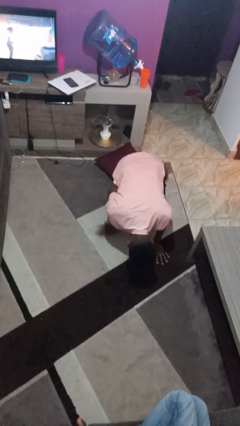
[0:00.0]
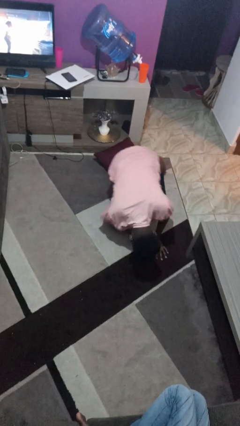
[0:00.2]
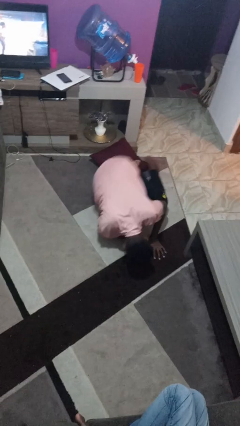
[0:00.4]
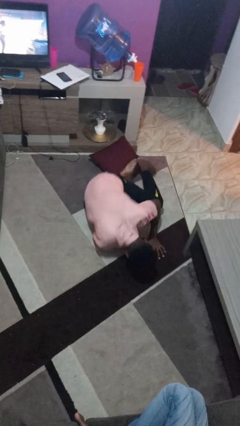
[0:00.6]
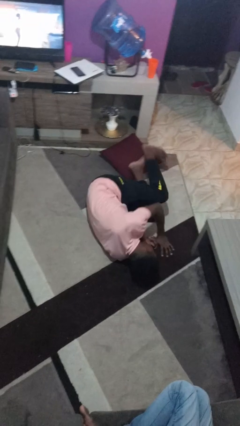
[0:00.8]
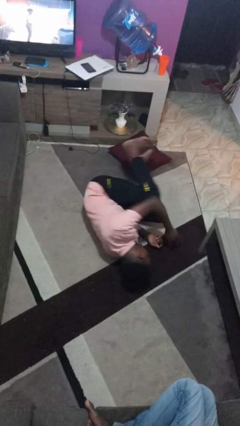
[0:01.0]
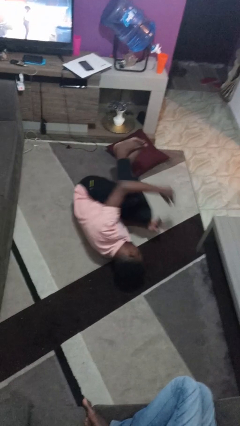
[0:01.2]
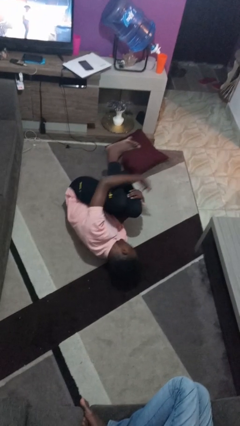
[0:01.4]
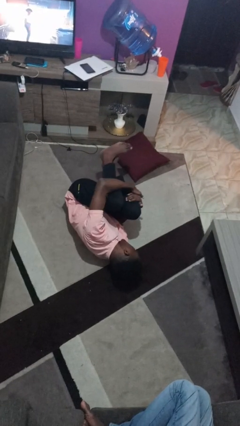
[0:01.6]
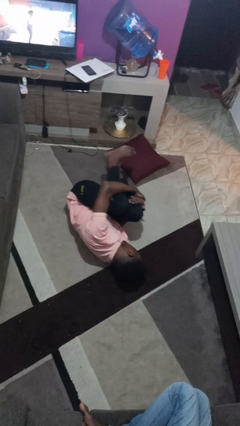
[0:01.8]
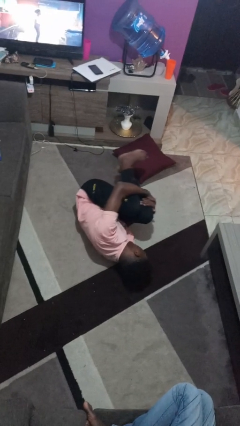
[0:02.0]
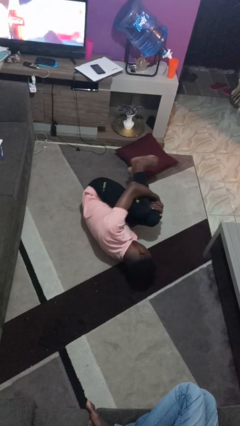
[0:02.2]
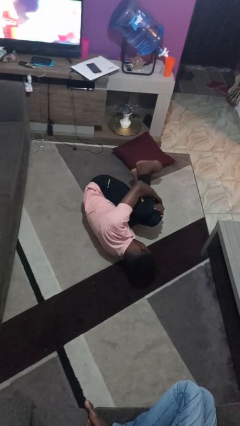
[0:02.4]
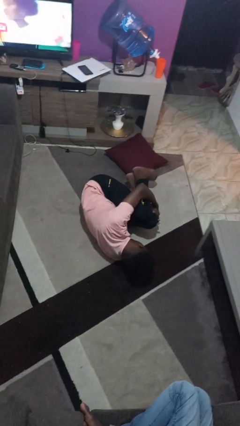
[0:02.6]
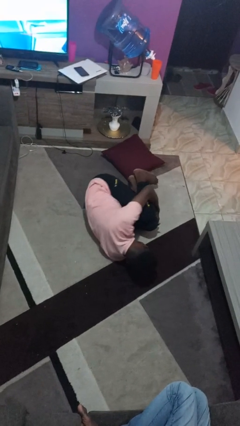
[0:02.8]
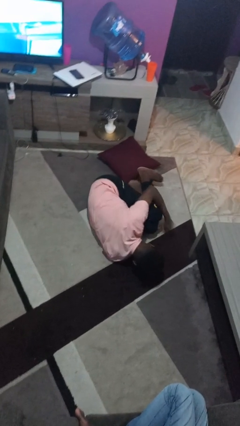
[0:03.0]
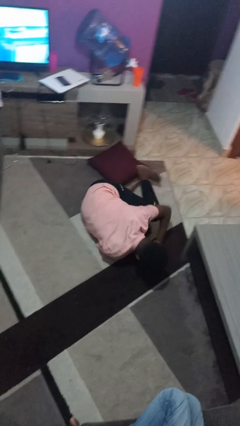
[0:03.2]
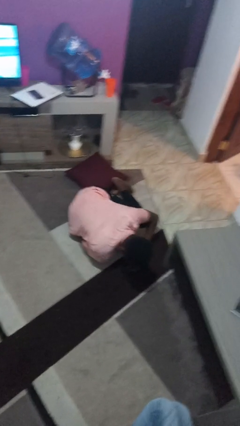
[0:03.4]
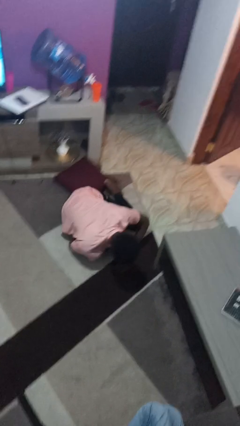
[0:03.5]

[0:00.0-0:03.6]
person lies down on floor

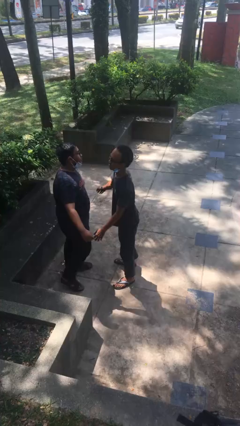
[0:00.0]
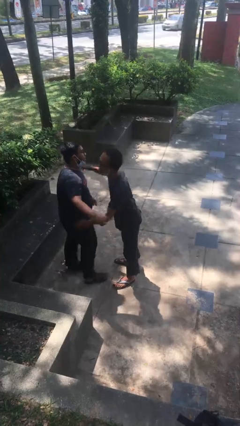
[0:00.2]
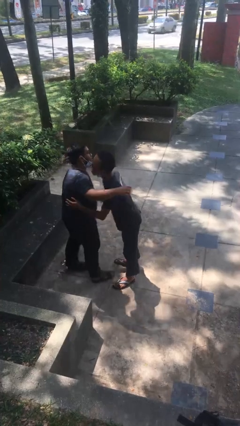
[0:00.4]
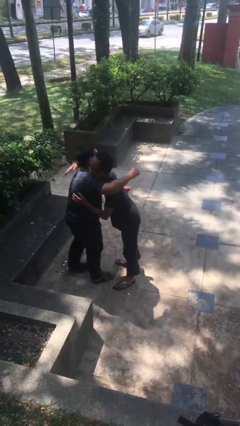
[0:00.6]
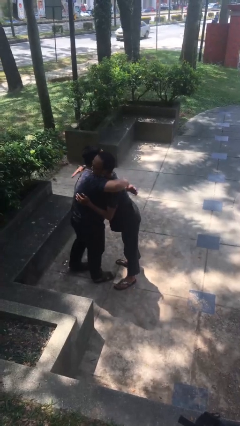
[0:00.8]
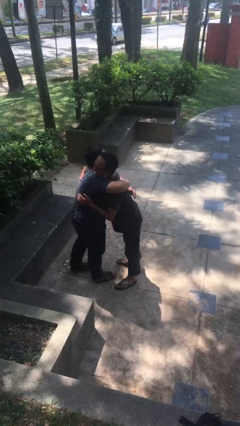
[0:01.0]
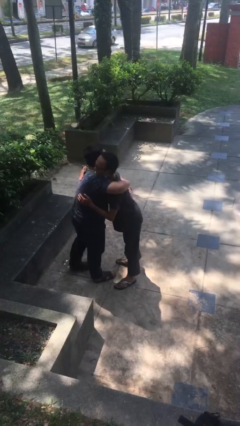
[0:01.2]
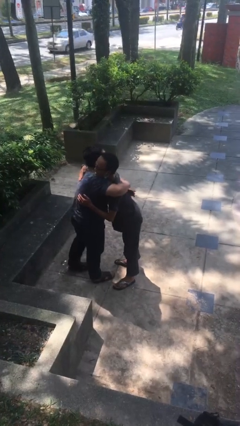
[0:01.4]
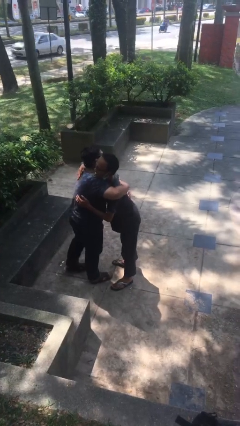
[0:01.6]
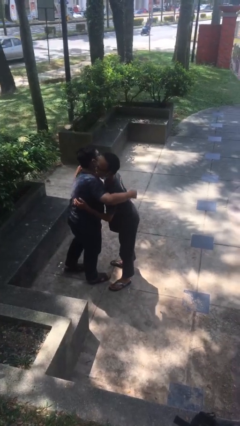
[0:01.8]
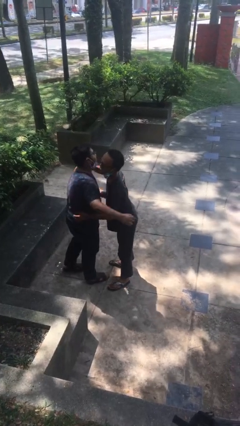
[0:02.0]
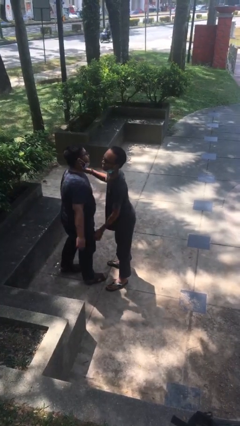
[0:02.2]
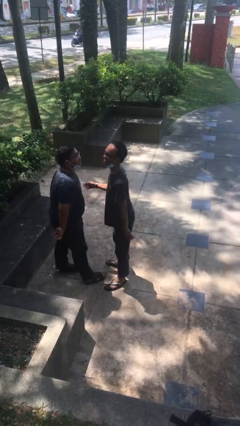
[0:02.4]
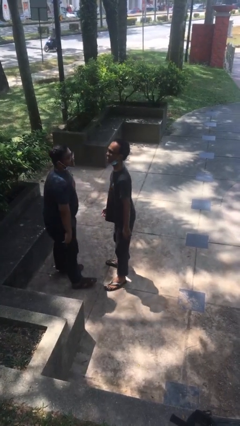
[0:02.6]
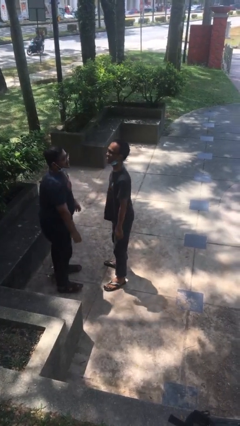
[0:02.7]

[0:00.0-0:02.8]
person embraces person

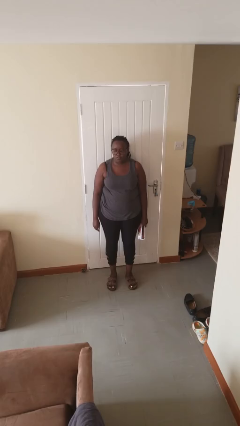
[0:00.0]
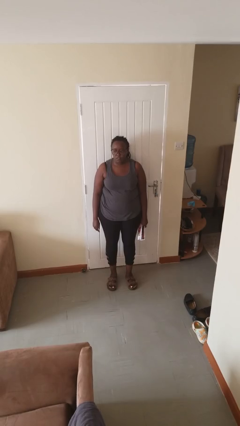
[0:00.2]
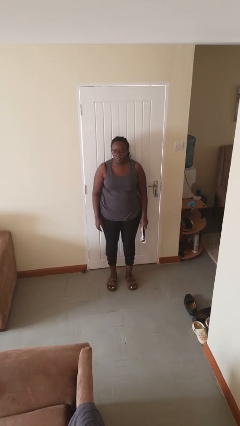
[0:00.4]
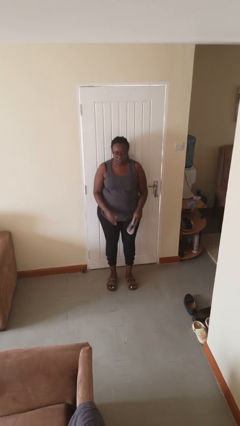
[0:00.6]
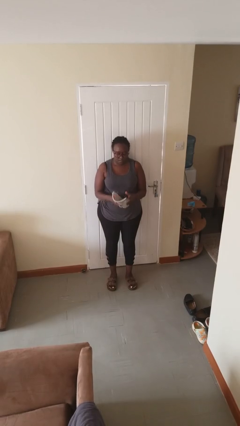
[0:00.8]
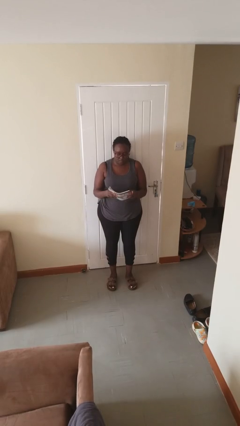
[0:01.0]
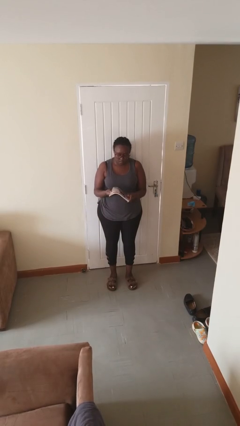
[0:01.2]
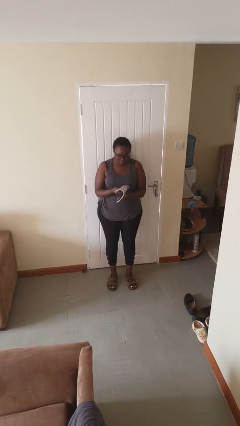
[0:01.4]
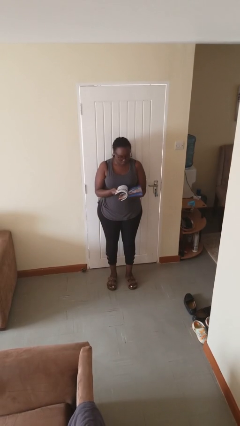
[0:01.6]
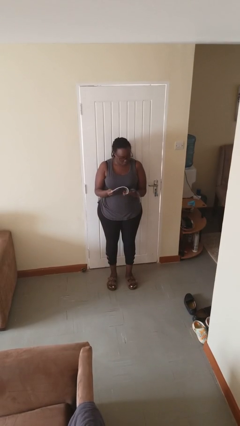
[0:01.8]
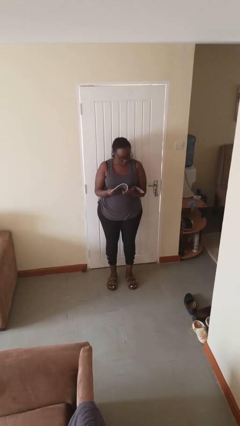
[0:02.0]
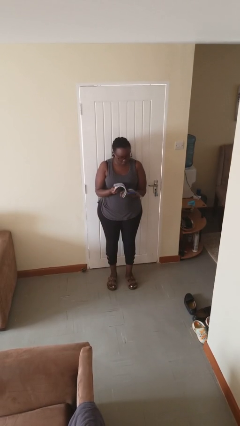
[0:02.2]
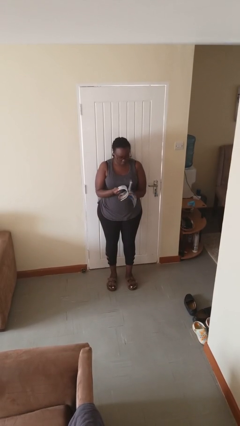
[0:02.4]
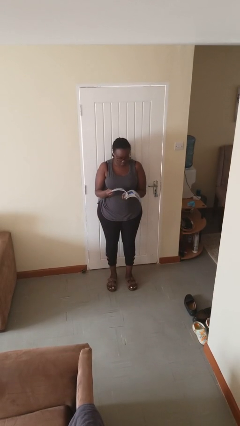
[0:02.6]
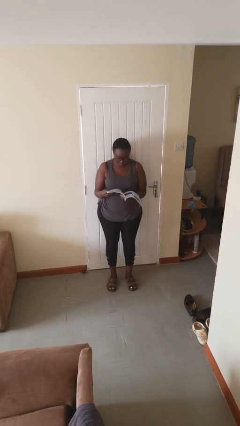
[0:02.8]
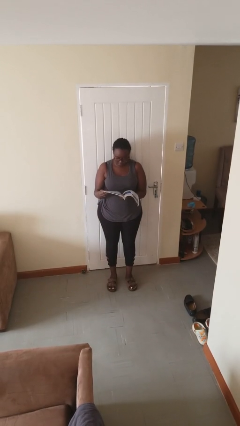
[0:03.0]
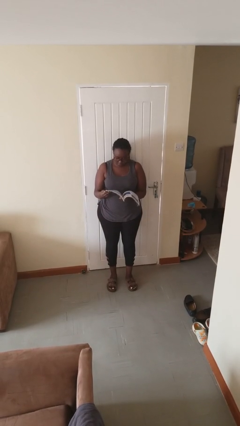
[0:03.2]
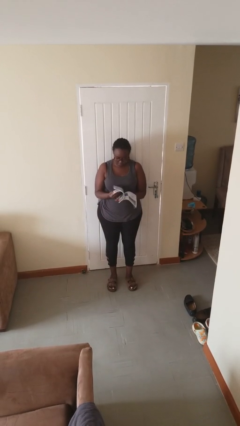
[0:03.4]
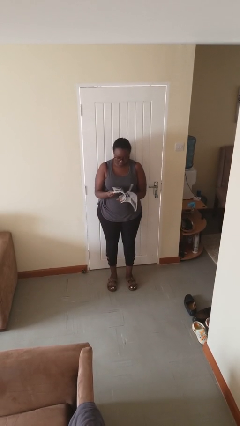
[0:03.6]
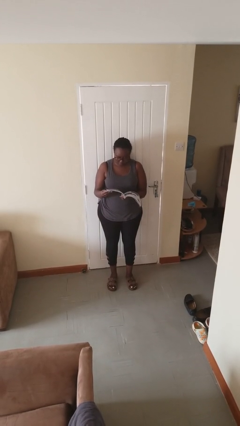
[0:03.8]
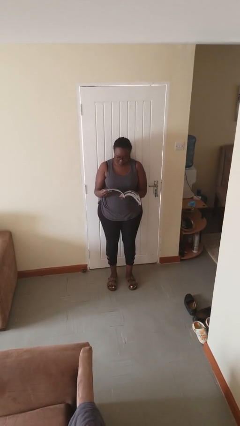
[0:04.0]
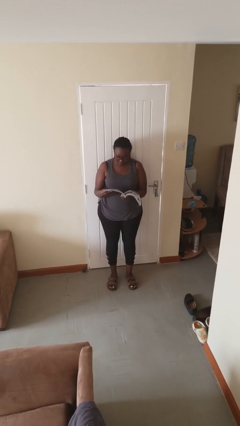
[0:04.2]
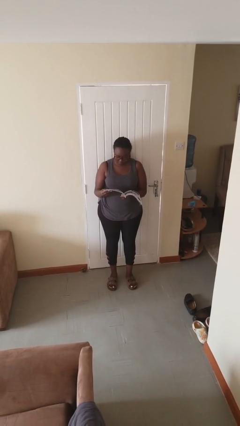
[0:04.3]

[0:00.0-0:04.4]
person reads magazine

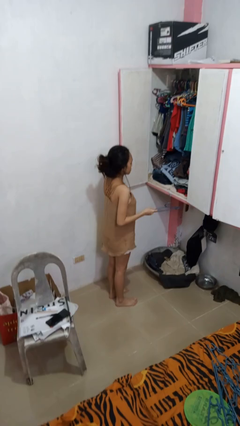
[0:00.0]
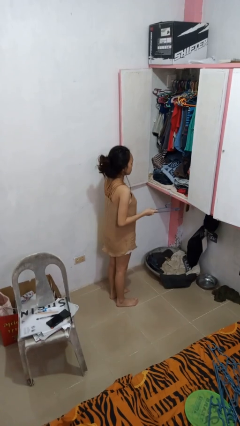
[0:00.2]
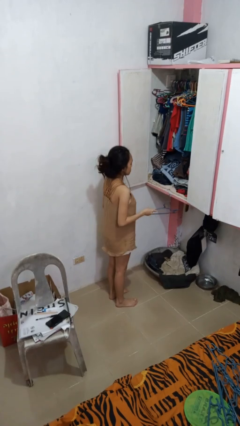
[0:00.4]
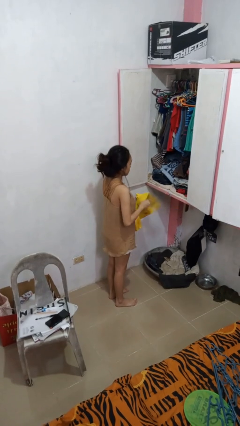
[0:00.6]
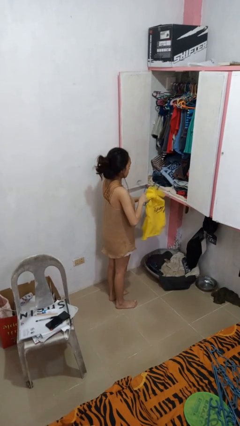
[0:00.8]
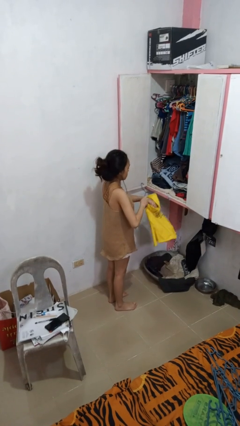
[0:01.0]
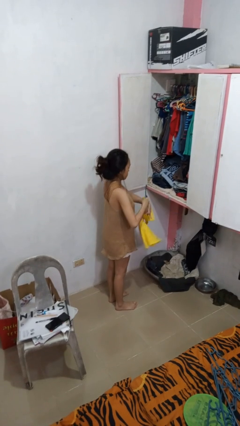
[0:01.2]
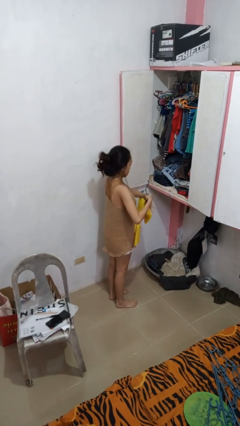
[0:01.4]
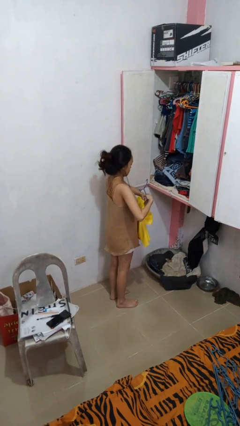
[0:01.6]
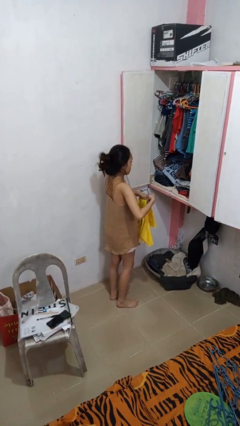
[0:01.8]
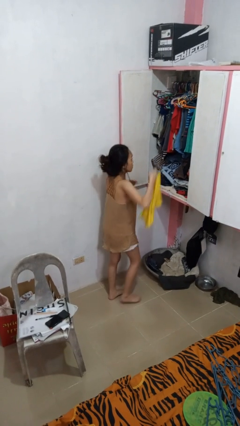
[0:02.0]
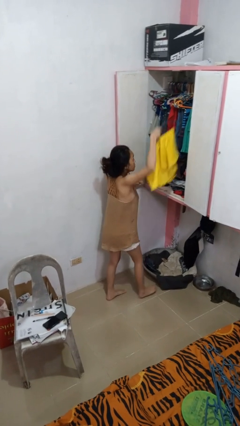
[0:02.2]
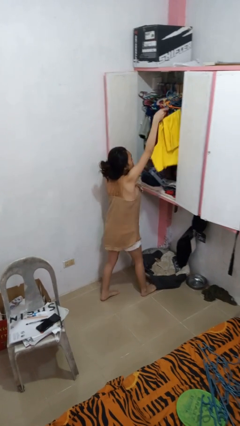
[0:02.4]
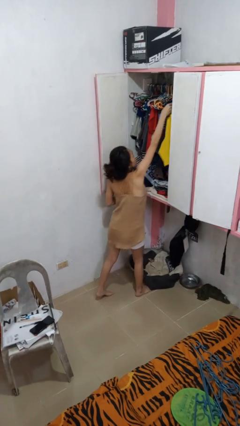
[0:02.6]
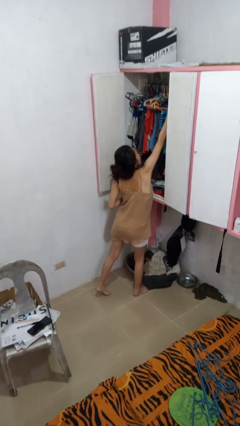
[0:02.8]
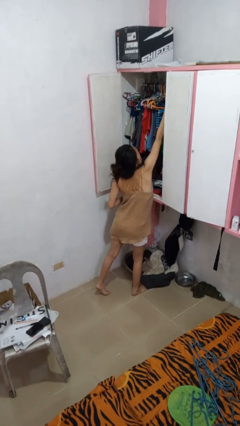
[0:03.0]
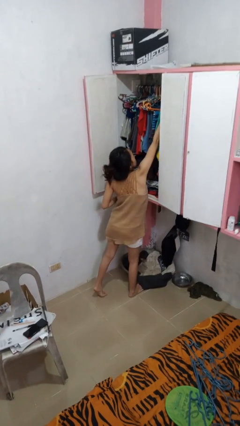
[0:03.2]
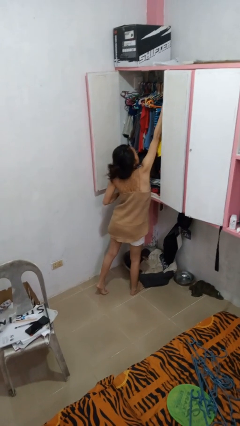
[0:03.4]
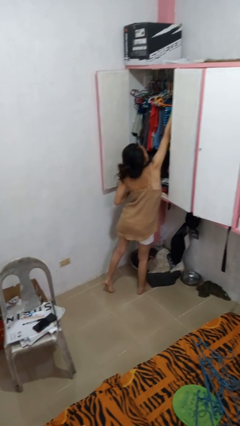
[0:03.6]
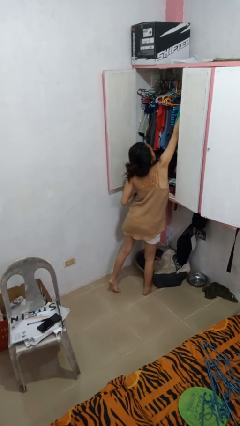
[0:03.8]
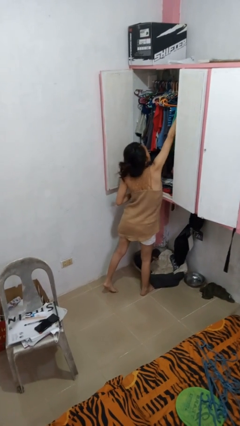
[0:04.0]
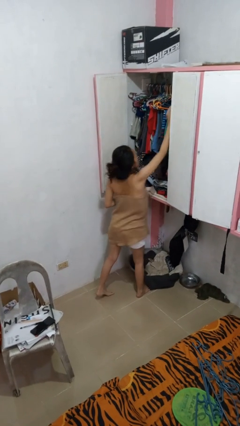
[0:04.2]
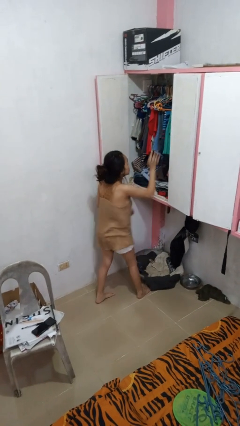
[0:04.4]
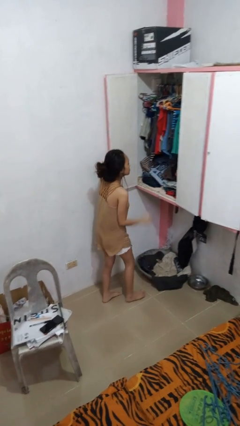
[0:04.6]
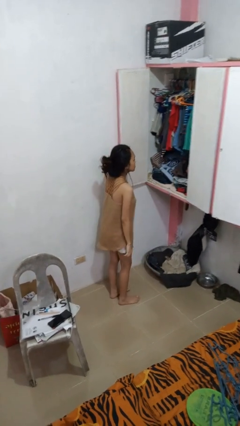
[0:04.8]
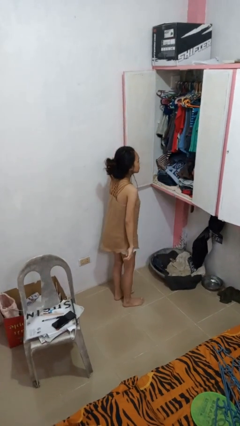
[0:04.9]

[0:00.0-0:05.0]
person puts clothes into closet

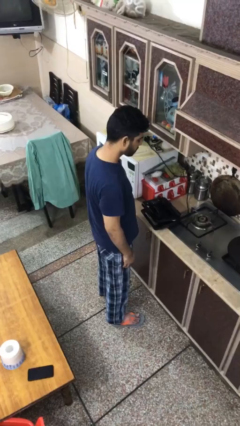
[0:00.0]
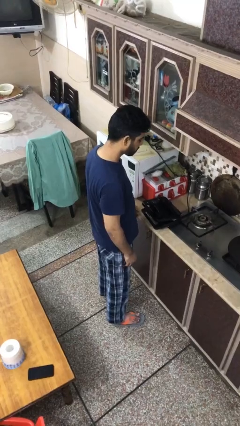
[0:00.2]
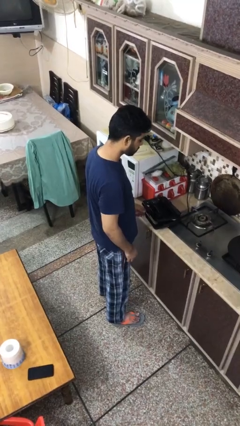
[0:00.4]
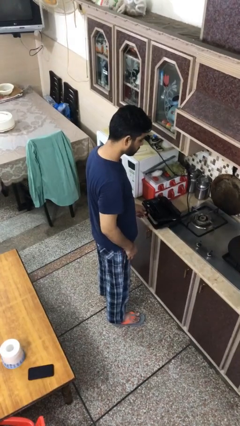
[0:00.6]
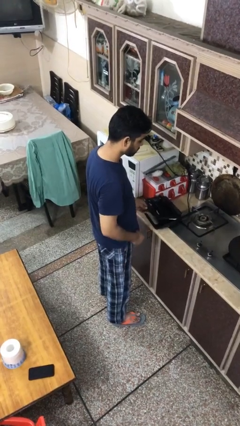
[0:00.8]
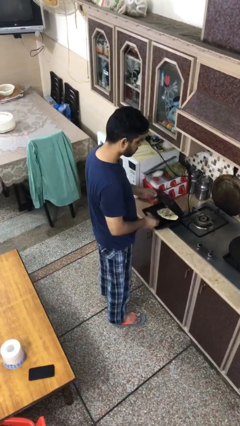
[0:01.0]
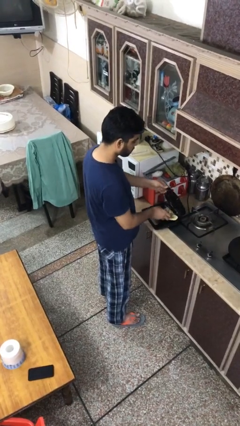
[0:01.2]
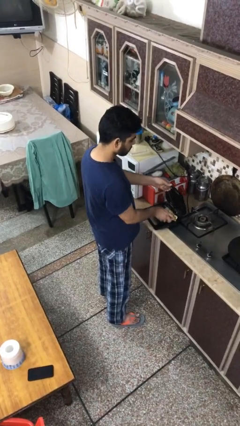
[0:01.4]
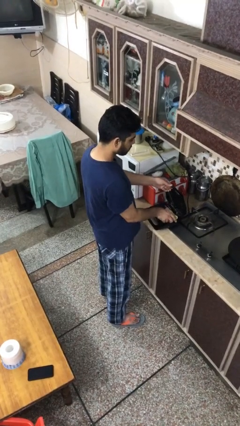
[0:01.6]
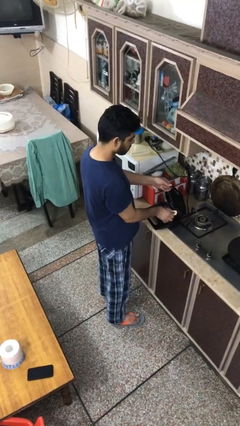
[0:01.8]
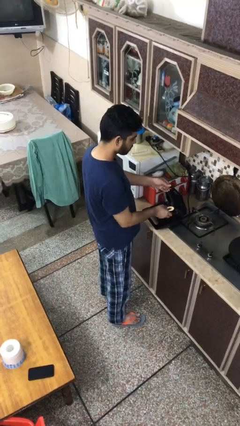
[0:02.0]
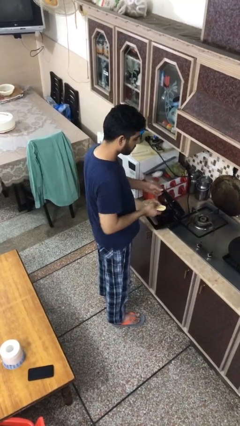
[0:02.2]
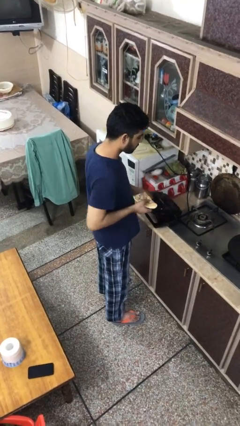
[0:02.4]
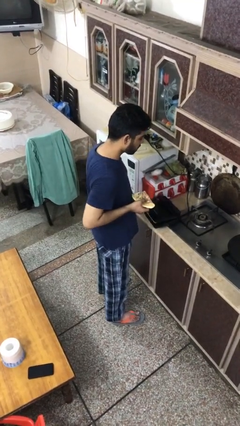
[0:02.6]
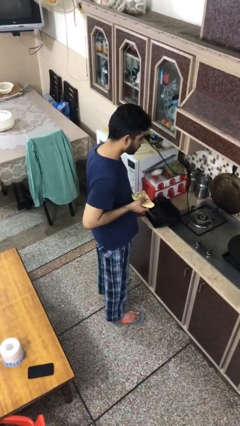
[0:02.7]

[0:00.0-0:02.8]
person takes object from toaster
